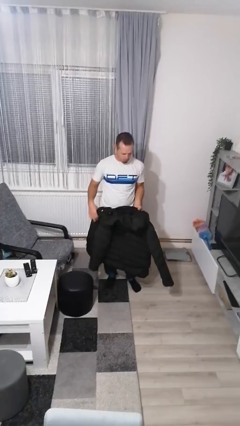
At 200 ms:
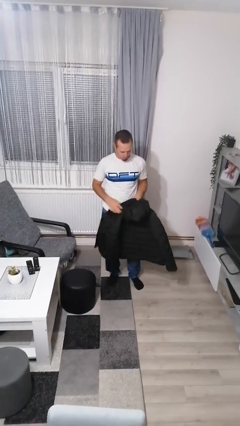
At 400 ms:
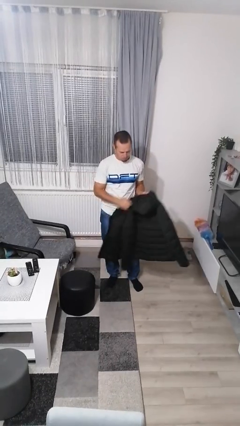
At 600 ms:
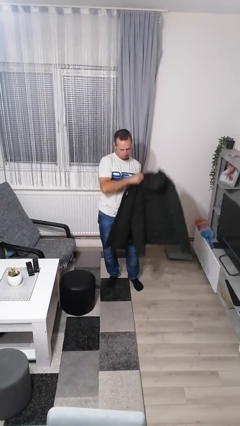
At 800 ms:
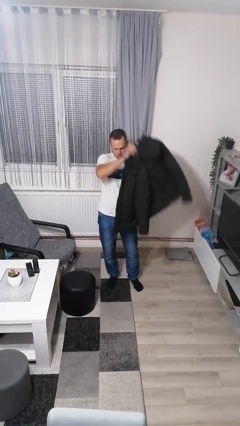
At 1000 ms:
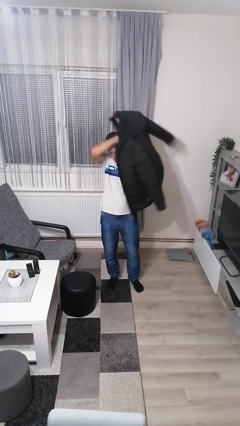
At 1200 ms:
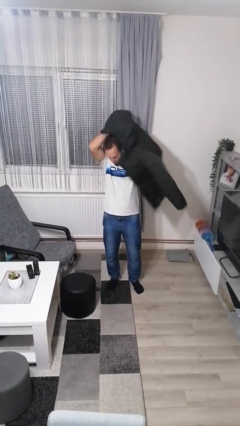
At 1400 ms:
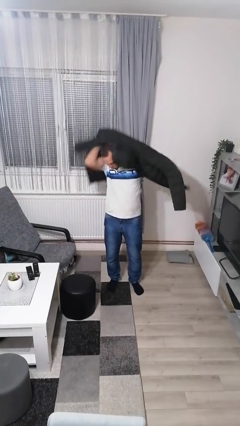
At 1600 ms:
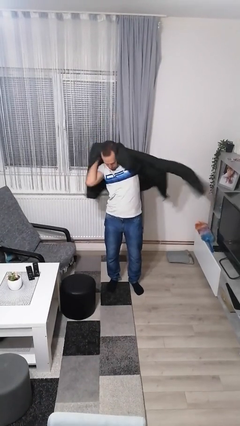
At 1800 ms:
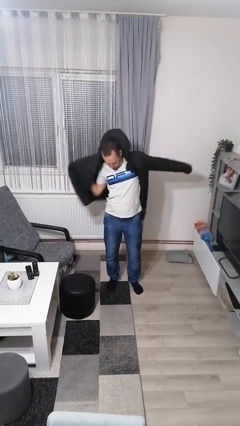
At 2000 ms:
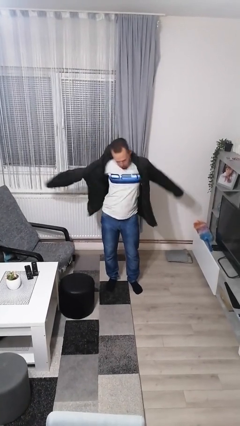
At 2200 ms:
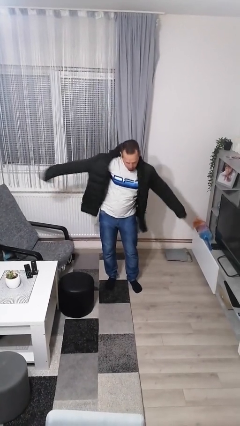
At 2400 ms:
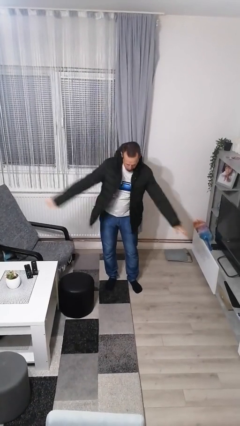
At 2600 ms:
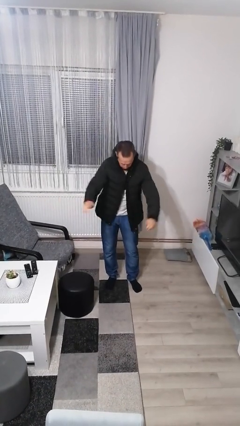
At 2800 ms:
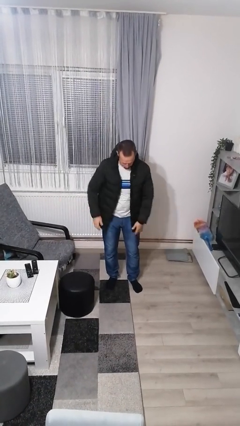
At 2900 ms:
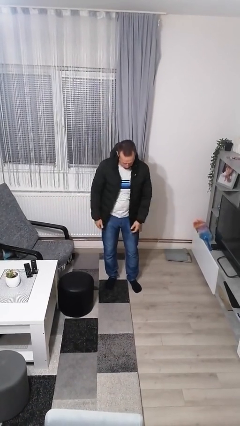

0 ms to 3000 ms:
person puts on jacket

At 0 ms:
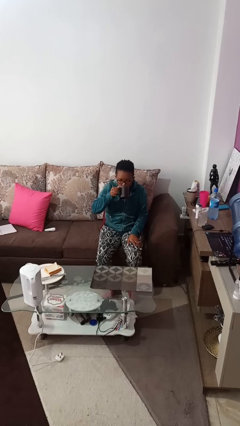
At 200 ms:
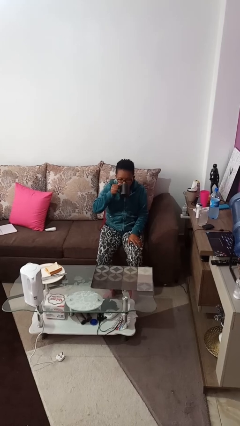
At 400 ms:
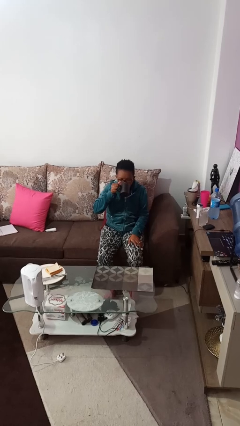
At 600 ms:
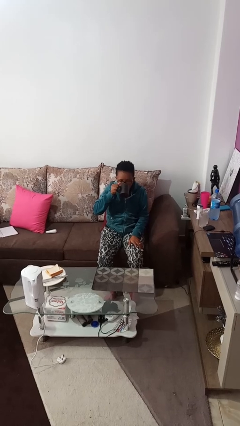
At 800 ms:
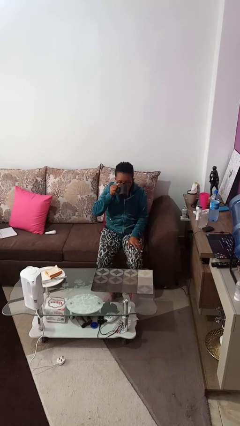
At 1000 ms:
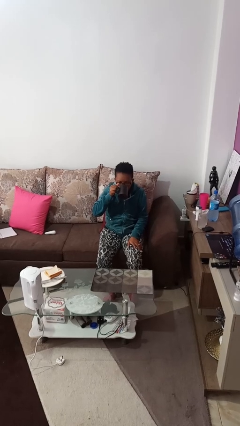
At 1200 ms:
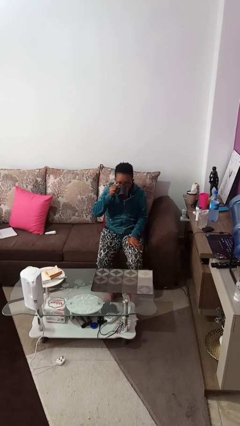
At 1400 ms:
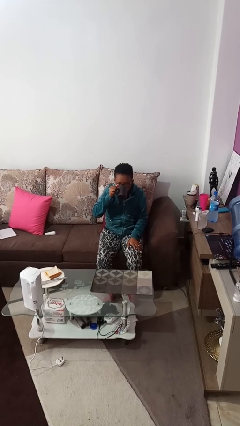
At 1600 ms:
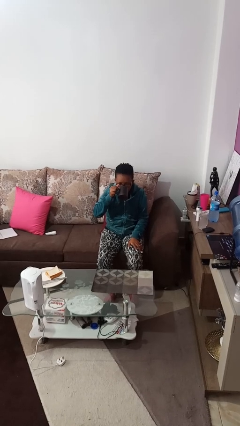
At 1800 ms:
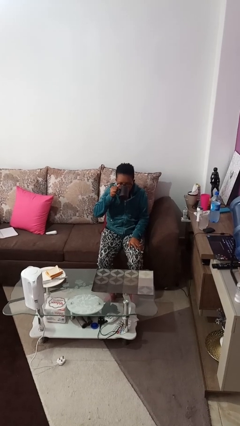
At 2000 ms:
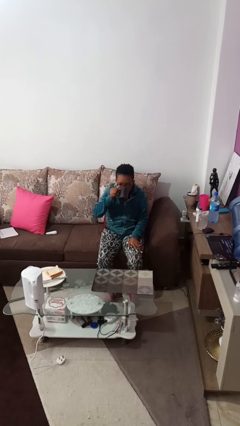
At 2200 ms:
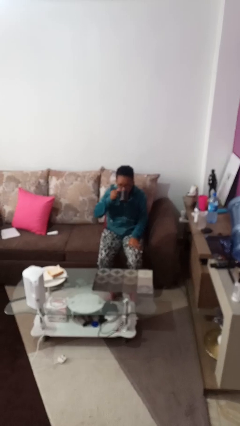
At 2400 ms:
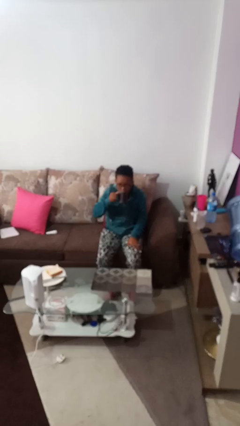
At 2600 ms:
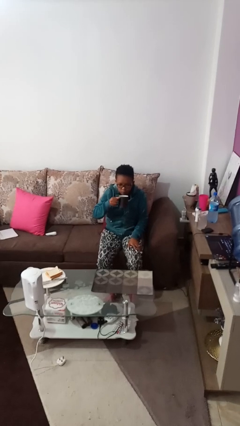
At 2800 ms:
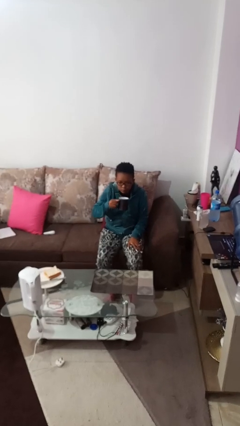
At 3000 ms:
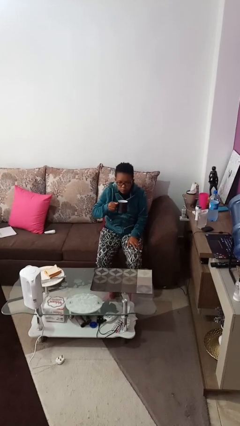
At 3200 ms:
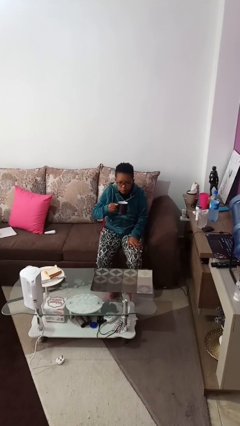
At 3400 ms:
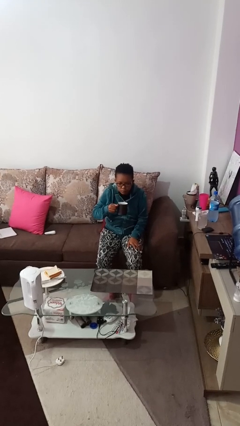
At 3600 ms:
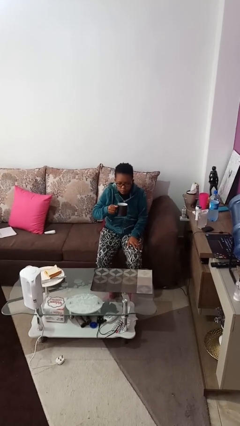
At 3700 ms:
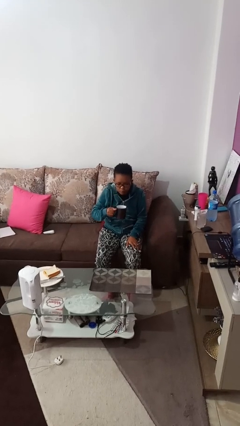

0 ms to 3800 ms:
person drinks from mug

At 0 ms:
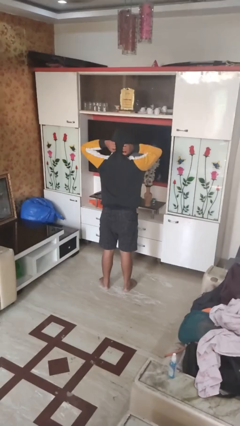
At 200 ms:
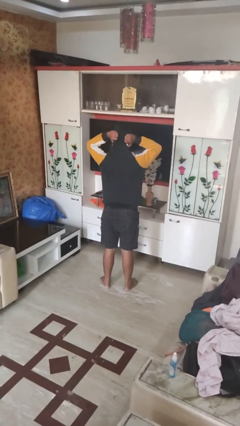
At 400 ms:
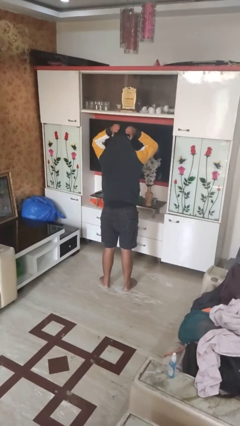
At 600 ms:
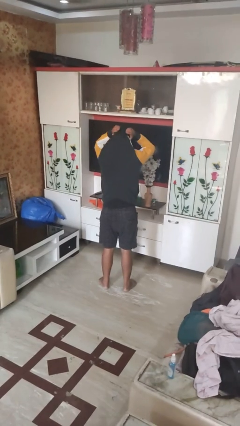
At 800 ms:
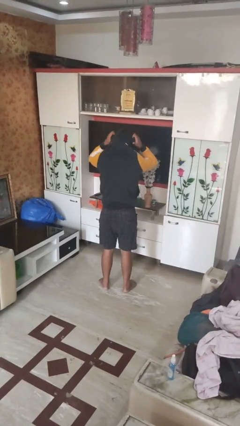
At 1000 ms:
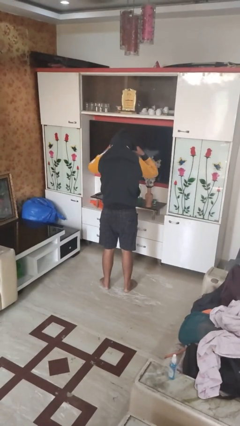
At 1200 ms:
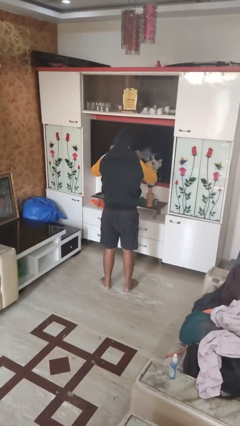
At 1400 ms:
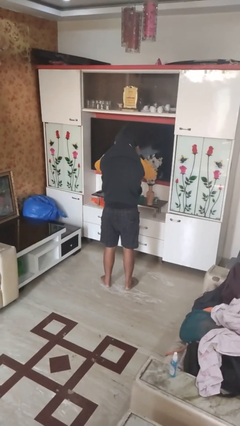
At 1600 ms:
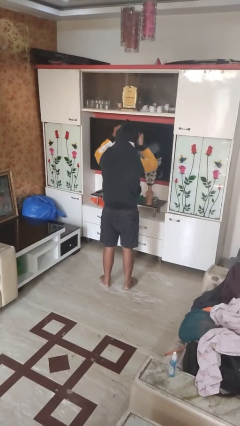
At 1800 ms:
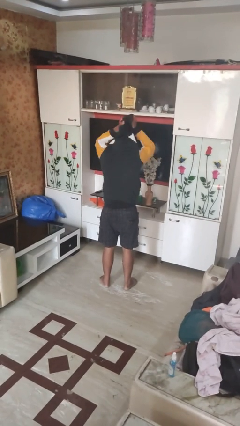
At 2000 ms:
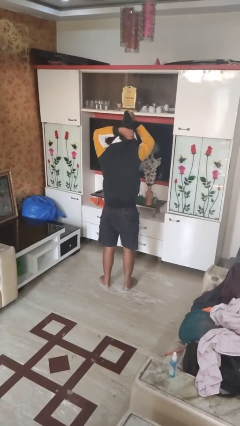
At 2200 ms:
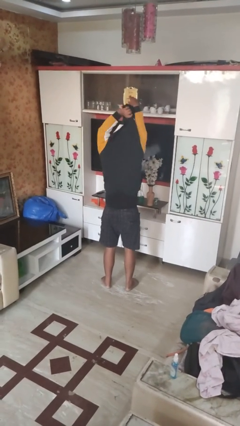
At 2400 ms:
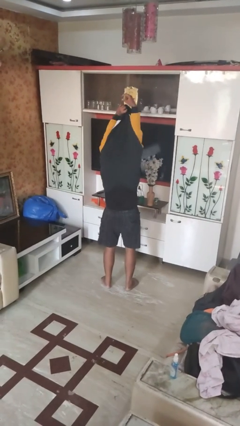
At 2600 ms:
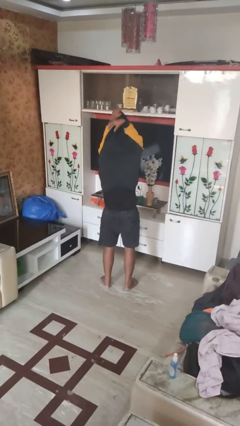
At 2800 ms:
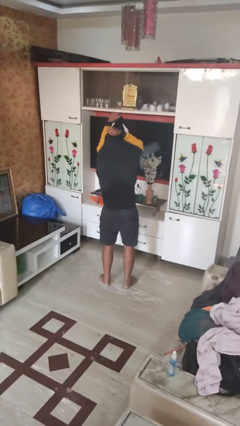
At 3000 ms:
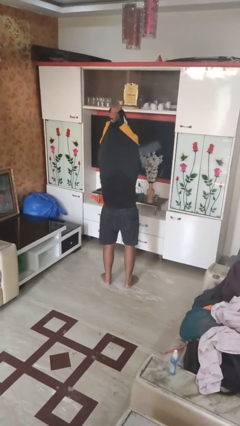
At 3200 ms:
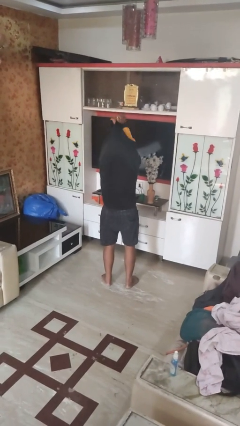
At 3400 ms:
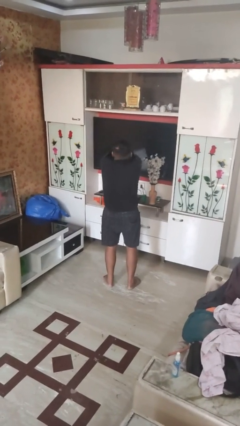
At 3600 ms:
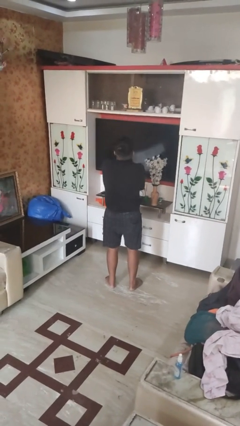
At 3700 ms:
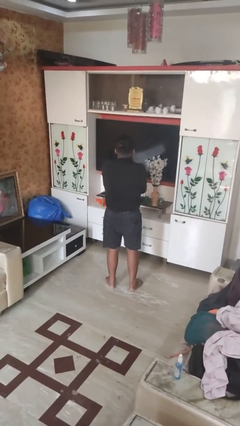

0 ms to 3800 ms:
person takes off hoodie

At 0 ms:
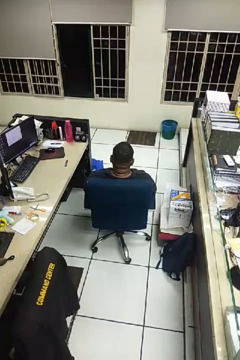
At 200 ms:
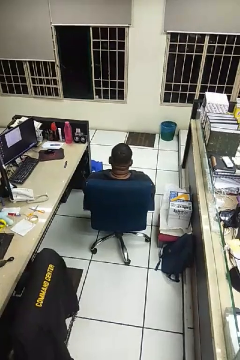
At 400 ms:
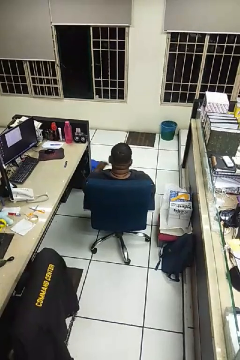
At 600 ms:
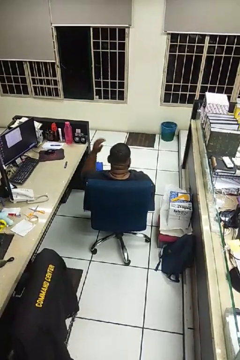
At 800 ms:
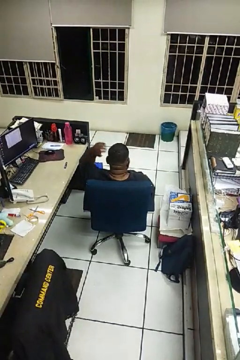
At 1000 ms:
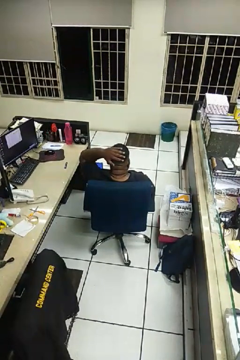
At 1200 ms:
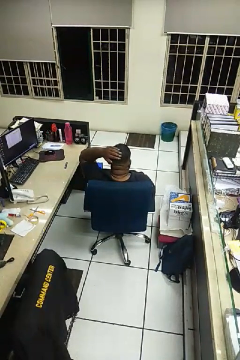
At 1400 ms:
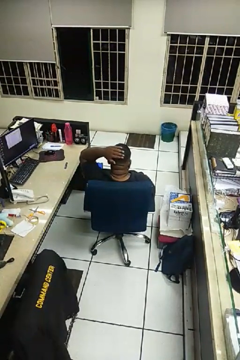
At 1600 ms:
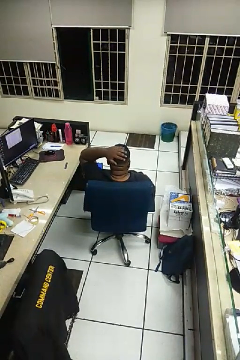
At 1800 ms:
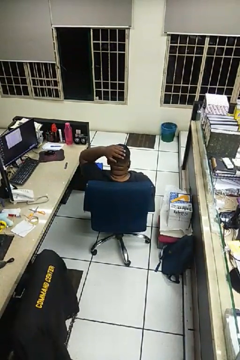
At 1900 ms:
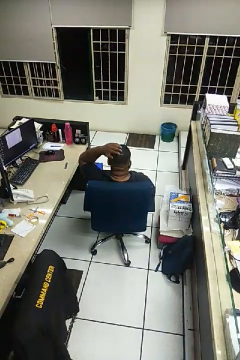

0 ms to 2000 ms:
person pats head

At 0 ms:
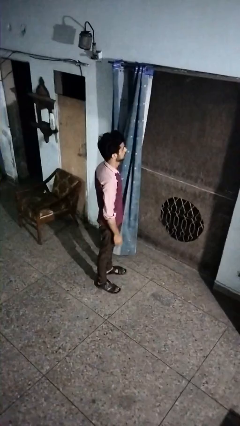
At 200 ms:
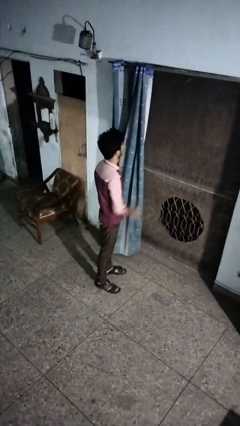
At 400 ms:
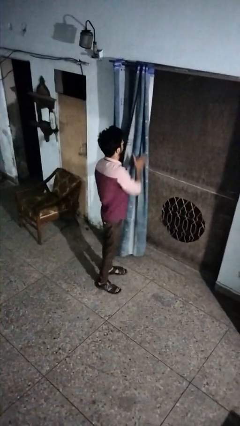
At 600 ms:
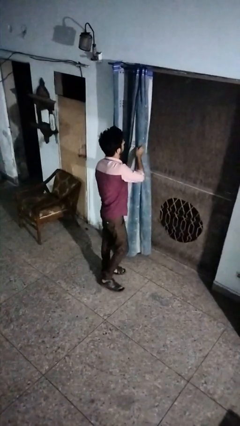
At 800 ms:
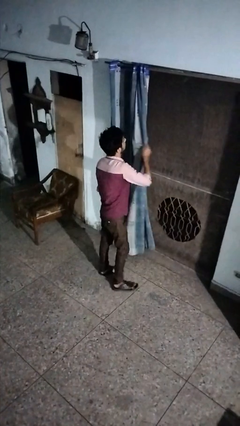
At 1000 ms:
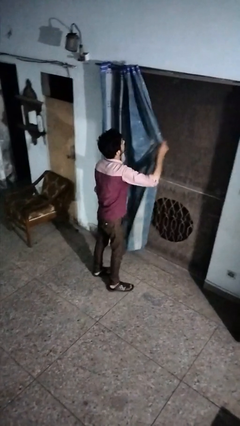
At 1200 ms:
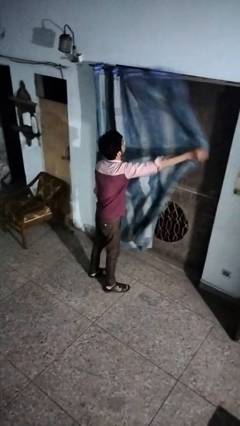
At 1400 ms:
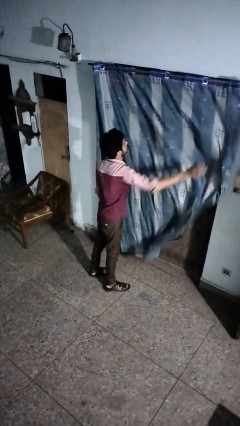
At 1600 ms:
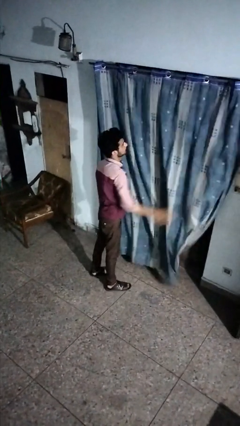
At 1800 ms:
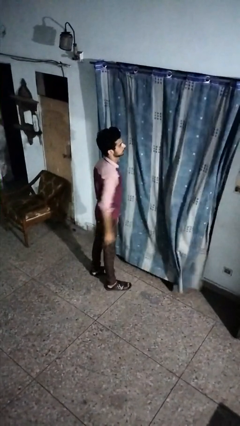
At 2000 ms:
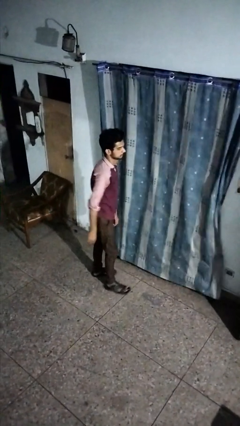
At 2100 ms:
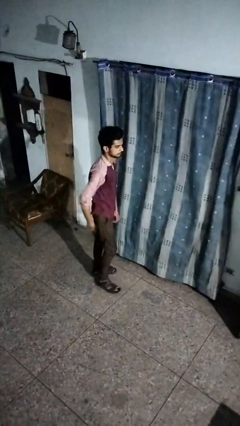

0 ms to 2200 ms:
person closes curtains

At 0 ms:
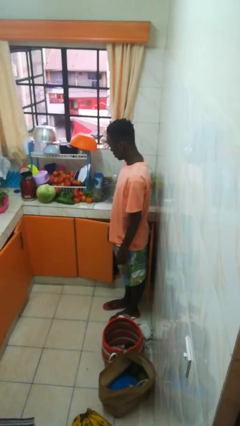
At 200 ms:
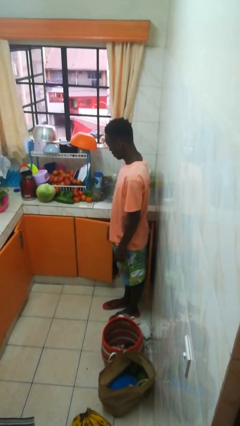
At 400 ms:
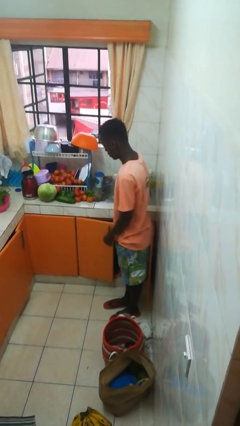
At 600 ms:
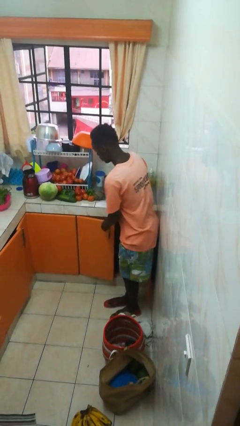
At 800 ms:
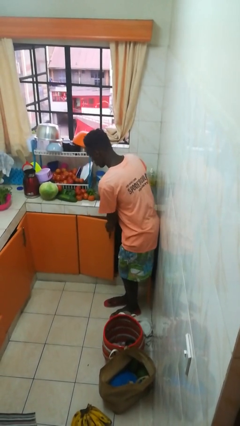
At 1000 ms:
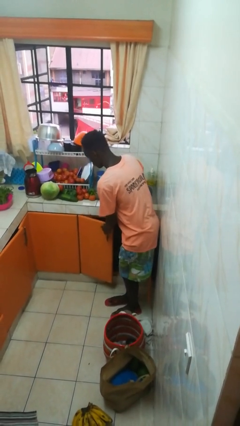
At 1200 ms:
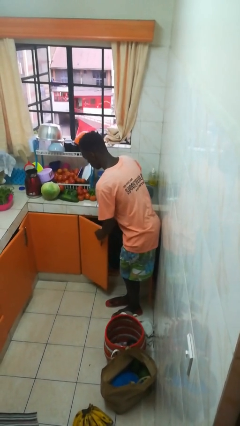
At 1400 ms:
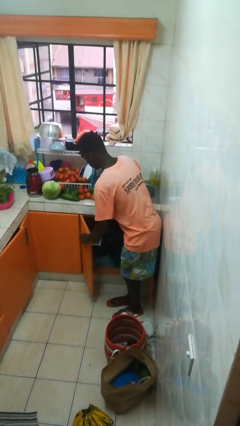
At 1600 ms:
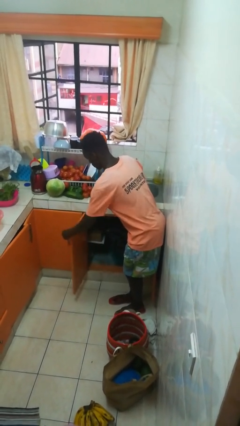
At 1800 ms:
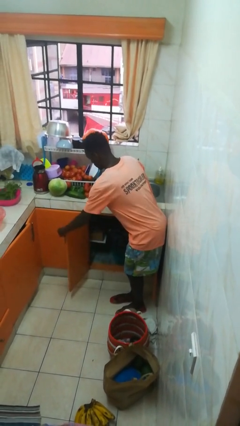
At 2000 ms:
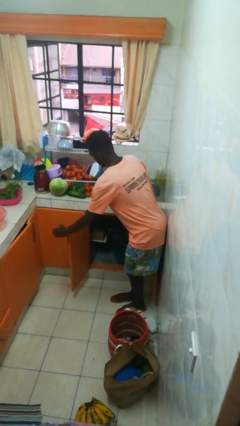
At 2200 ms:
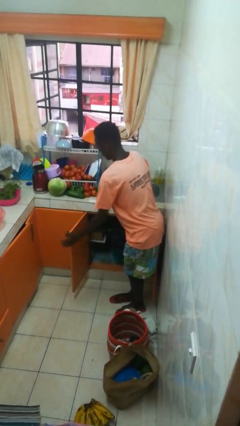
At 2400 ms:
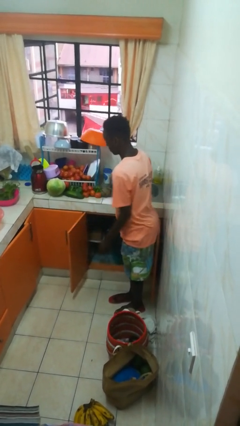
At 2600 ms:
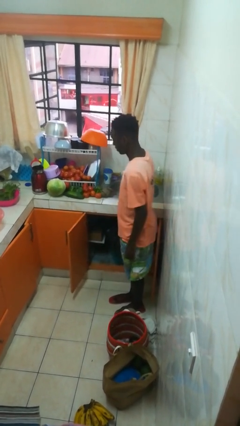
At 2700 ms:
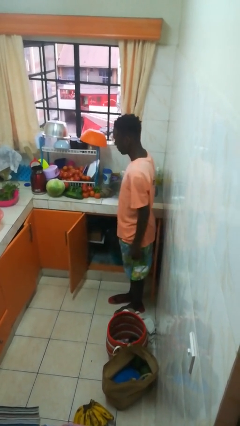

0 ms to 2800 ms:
person opens cabinet

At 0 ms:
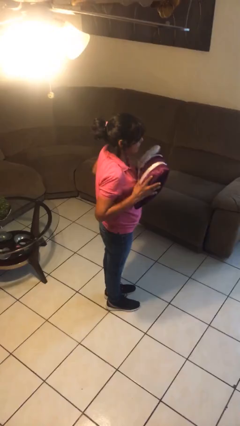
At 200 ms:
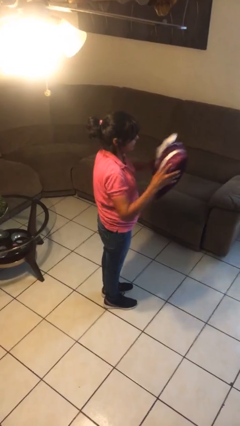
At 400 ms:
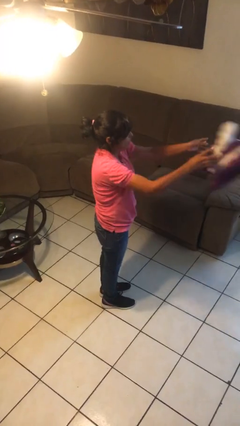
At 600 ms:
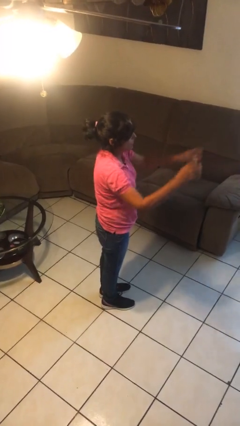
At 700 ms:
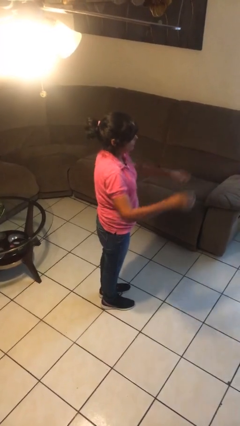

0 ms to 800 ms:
person throws object to ground
